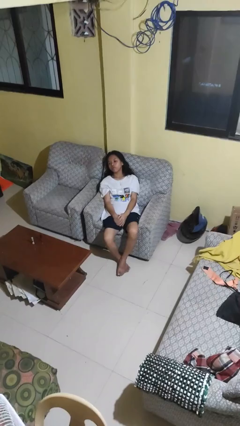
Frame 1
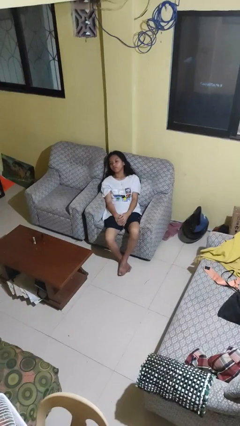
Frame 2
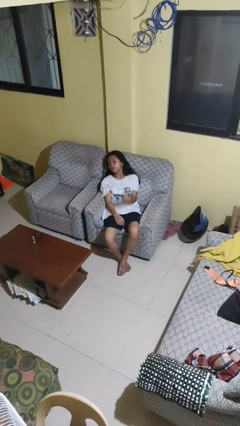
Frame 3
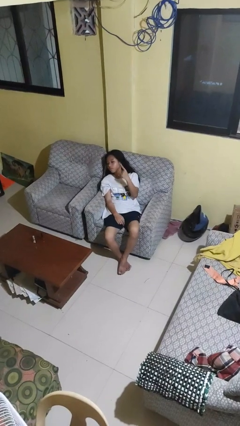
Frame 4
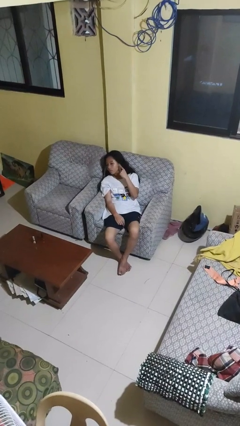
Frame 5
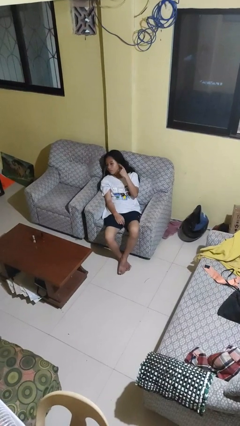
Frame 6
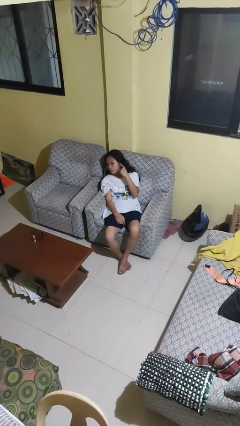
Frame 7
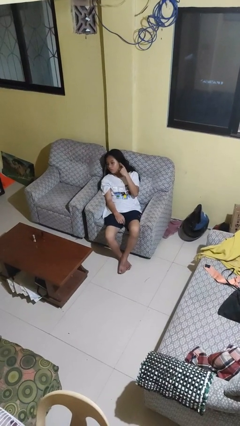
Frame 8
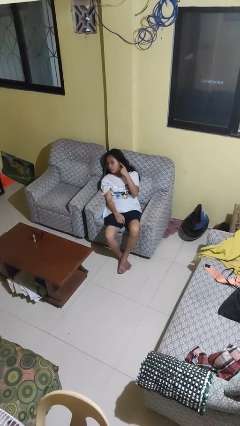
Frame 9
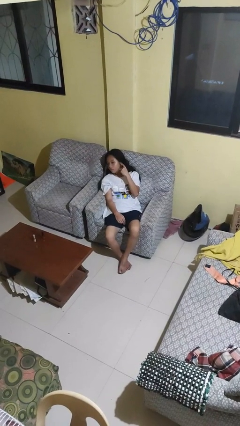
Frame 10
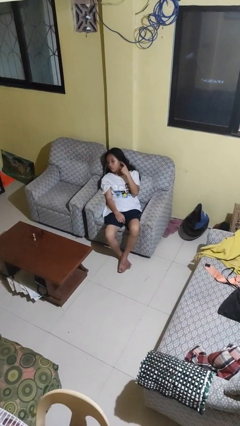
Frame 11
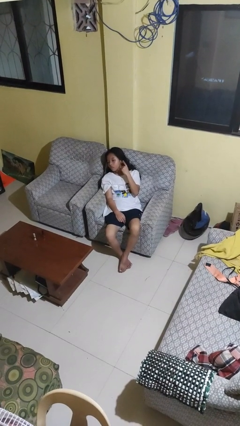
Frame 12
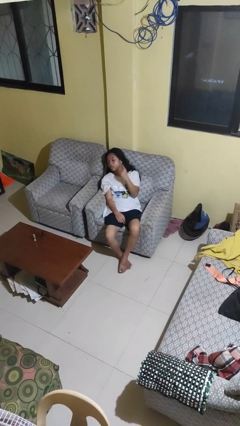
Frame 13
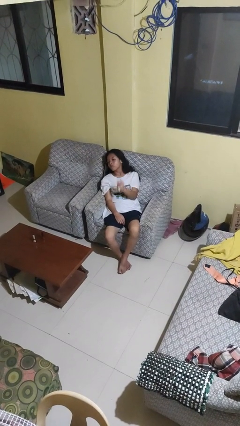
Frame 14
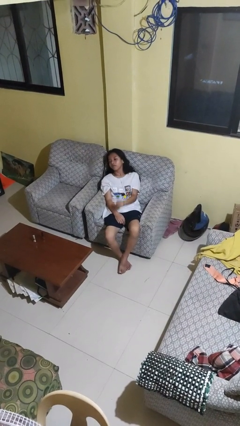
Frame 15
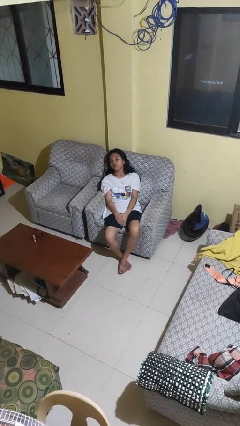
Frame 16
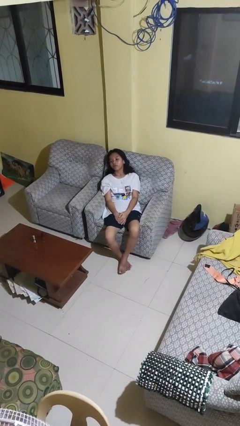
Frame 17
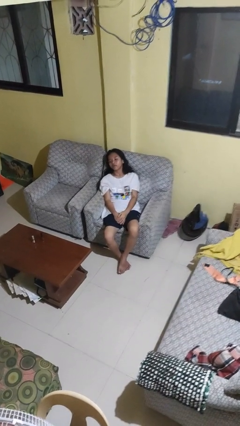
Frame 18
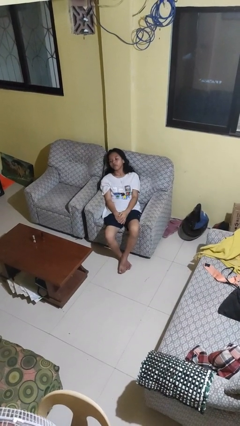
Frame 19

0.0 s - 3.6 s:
person gestures listen closely

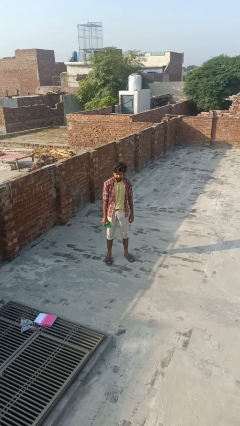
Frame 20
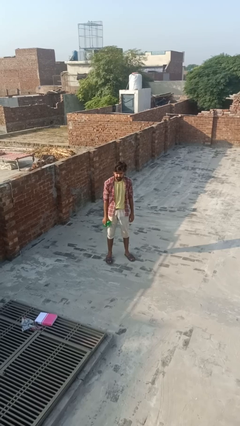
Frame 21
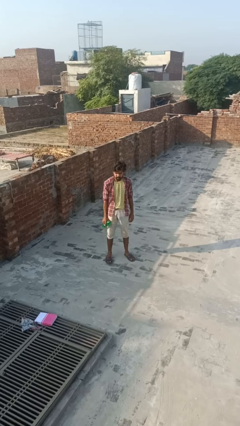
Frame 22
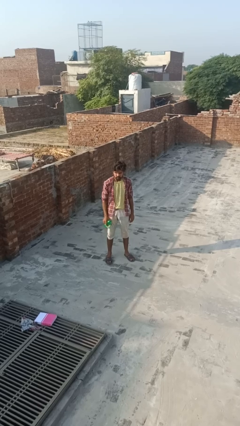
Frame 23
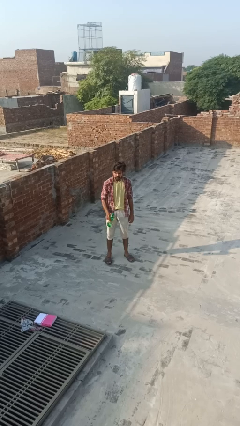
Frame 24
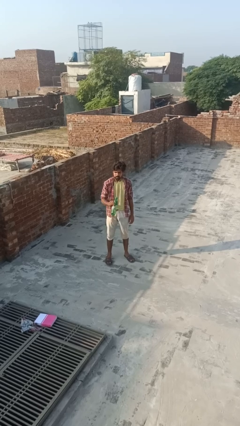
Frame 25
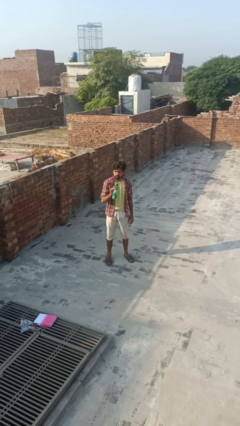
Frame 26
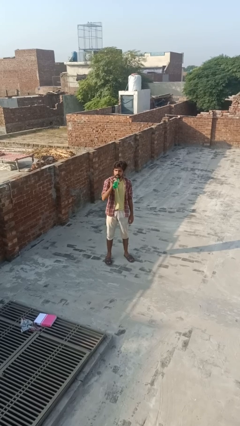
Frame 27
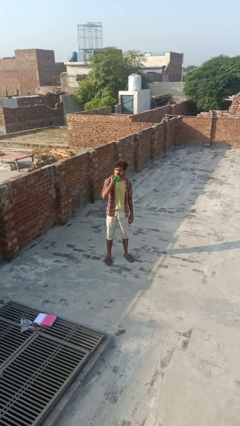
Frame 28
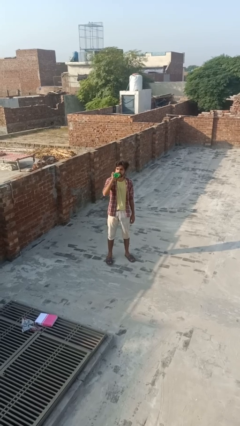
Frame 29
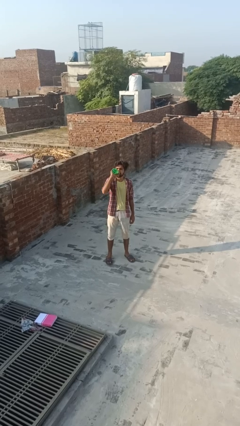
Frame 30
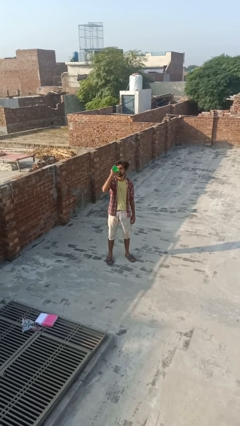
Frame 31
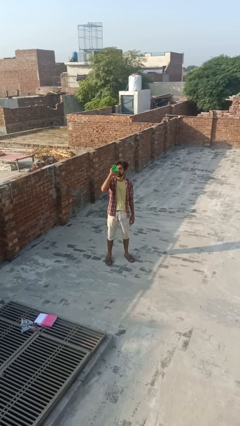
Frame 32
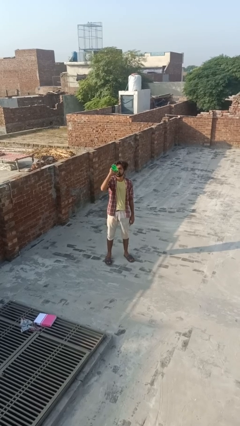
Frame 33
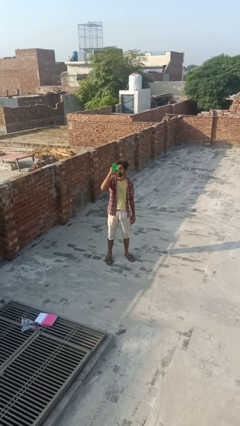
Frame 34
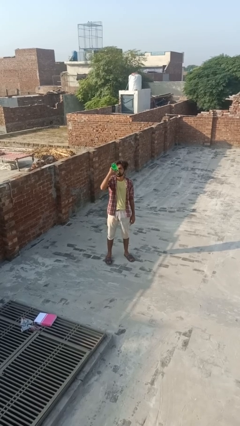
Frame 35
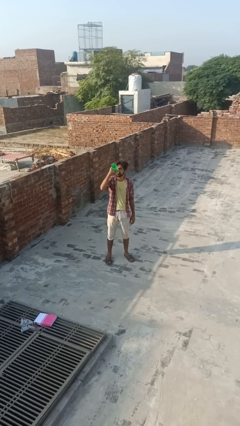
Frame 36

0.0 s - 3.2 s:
person drinks from bottle

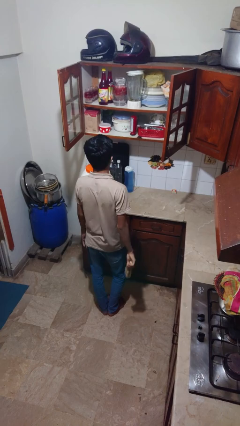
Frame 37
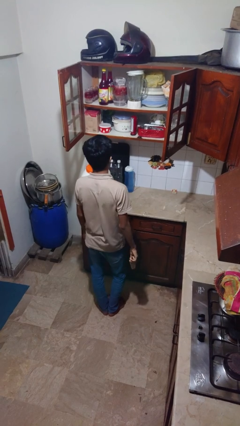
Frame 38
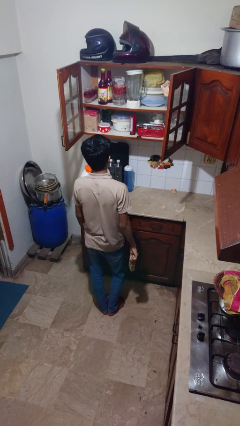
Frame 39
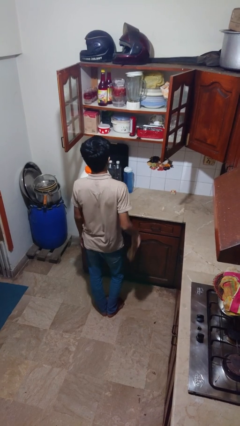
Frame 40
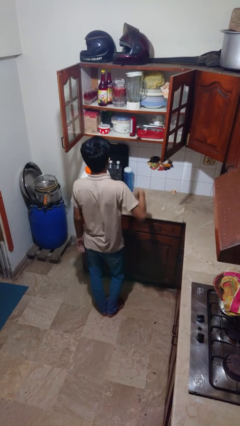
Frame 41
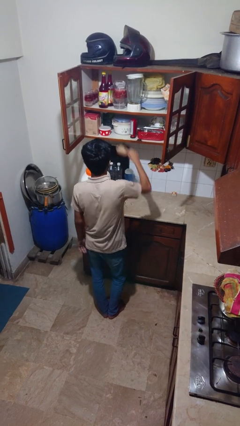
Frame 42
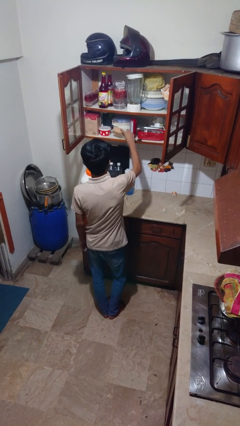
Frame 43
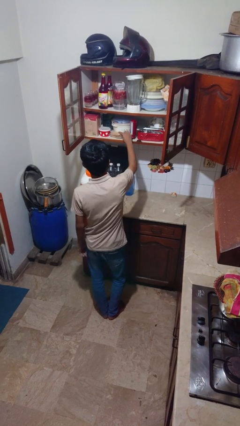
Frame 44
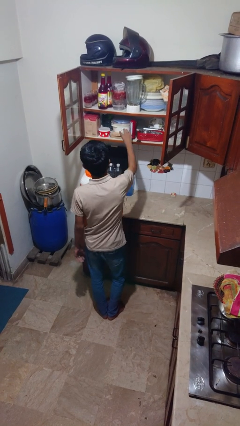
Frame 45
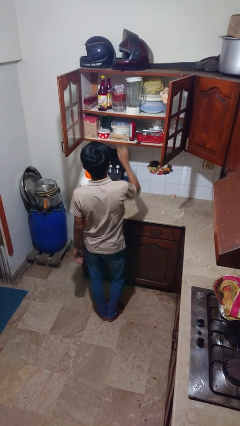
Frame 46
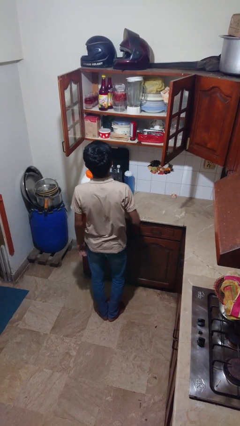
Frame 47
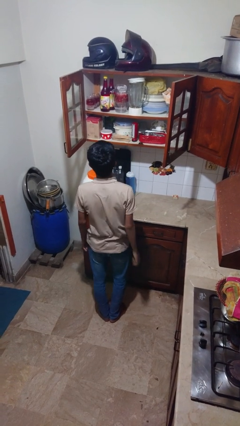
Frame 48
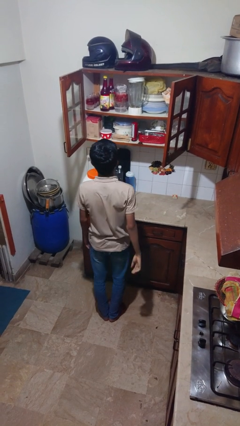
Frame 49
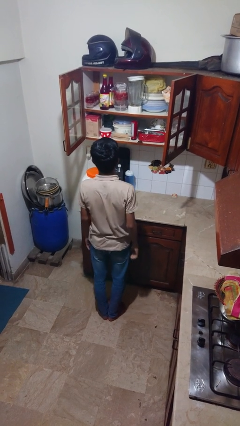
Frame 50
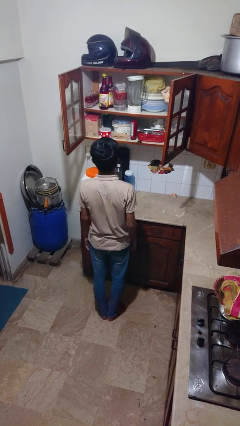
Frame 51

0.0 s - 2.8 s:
person puts down object into cabinet

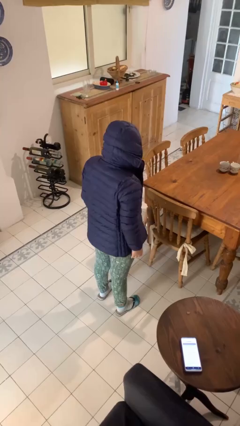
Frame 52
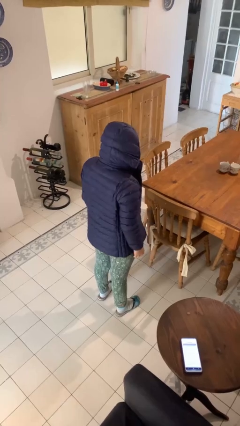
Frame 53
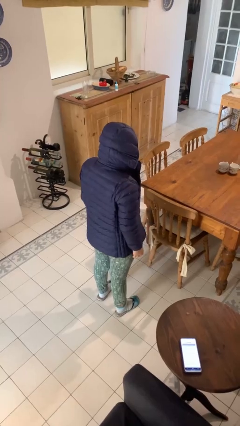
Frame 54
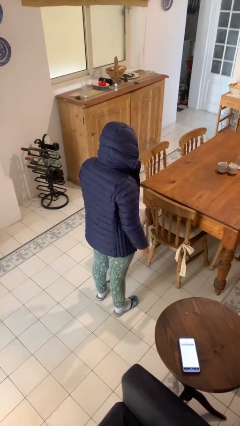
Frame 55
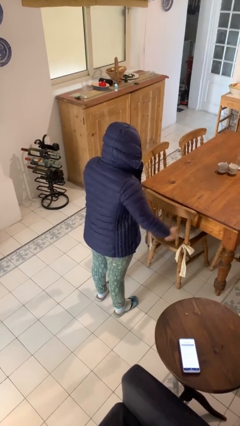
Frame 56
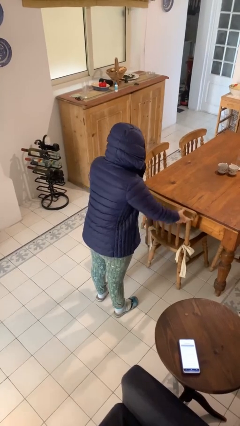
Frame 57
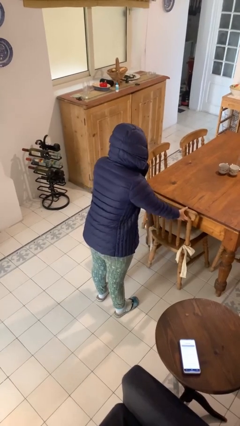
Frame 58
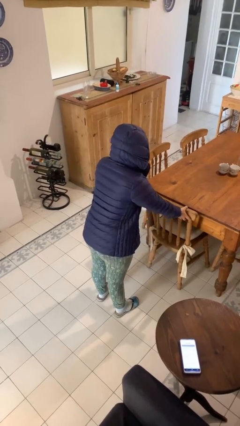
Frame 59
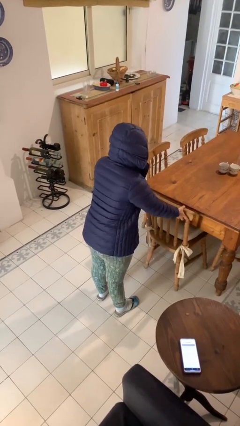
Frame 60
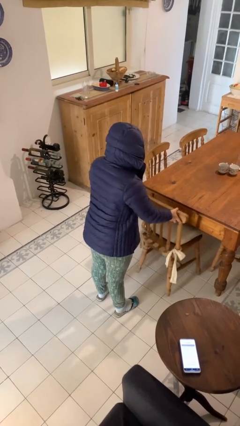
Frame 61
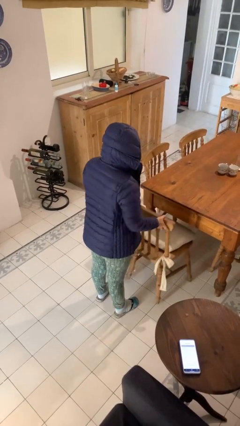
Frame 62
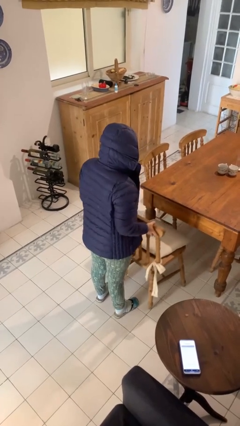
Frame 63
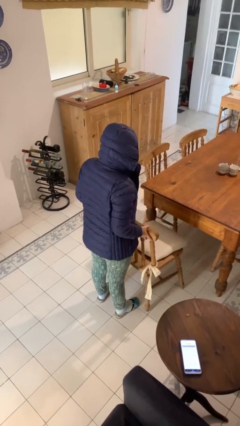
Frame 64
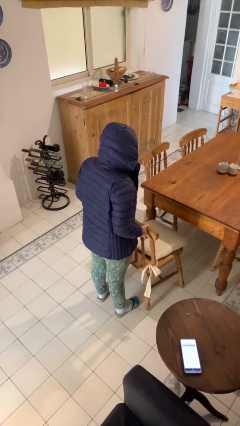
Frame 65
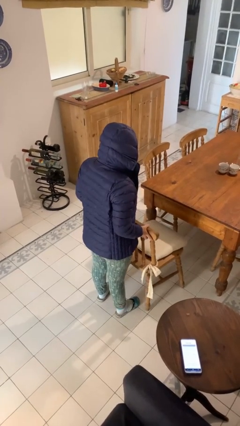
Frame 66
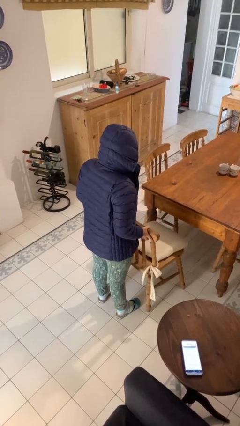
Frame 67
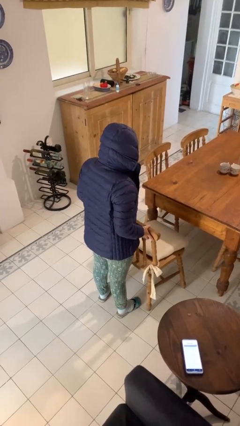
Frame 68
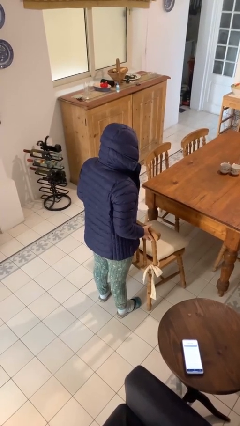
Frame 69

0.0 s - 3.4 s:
person pulls out chair

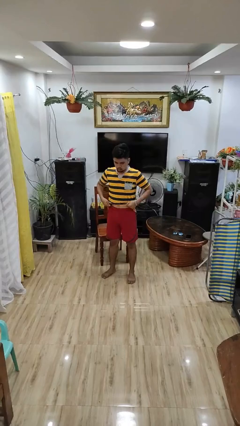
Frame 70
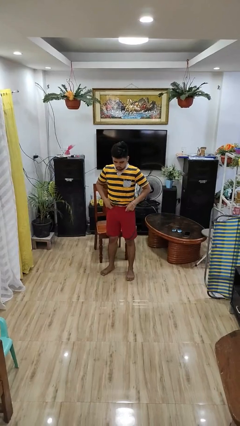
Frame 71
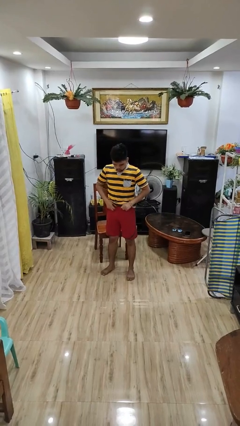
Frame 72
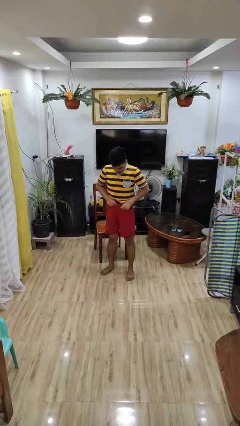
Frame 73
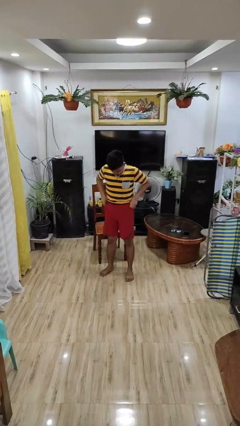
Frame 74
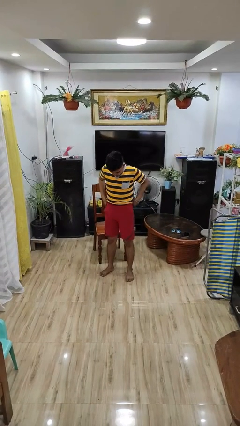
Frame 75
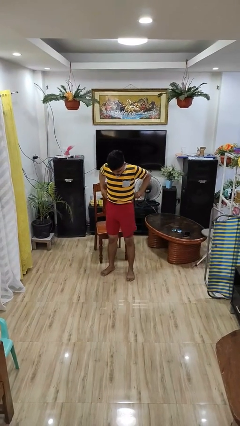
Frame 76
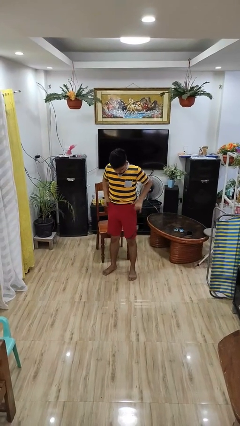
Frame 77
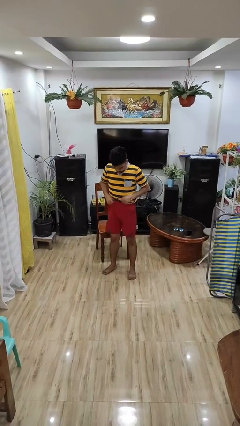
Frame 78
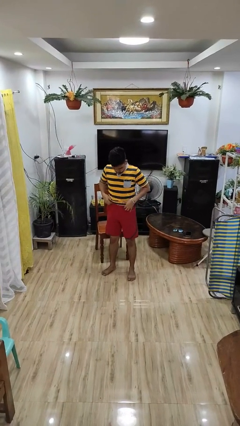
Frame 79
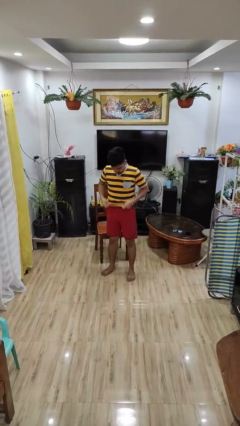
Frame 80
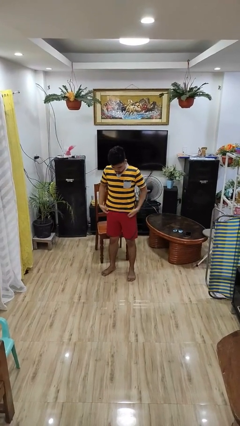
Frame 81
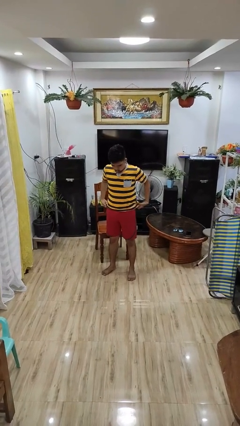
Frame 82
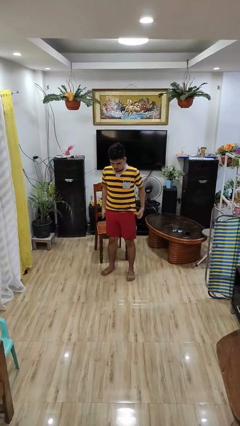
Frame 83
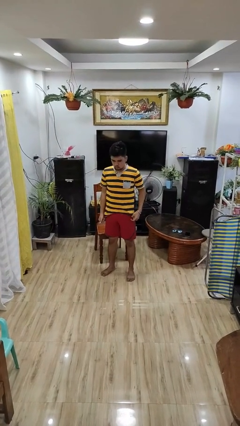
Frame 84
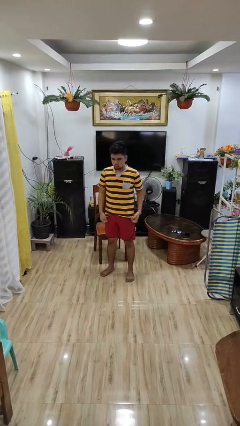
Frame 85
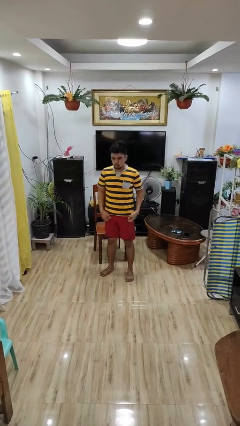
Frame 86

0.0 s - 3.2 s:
person hikes up pants

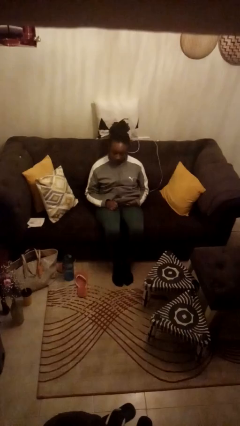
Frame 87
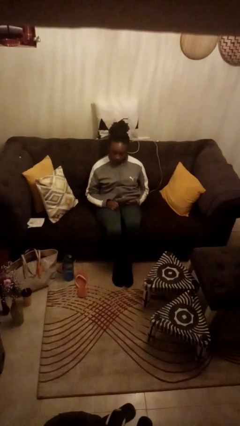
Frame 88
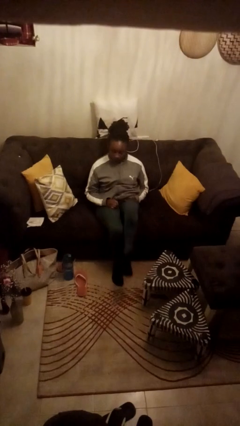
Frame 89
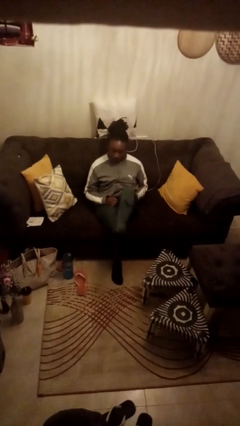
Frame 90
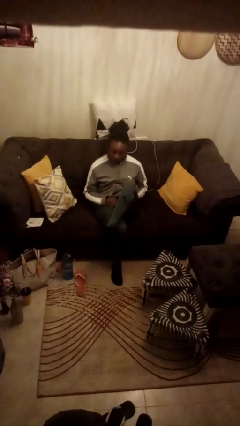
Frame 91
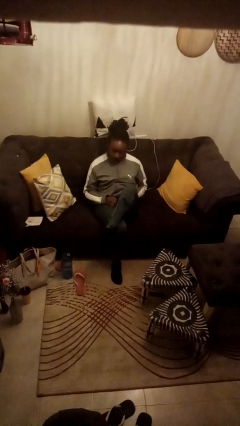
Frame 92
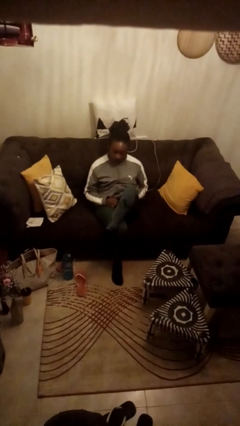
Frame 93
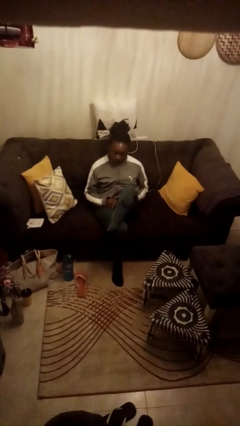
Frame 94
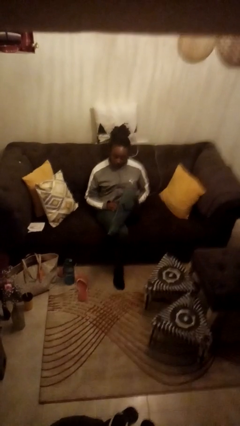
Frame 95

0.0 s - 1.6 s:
person crosses legs
